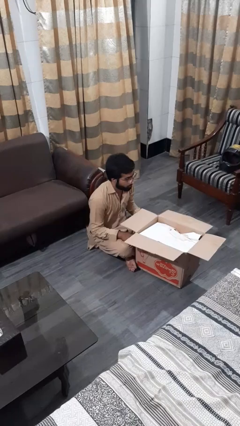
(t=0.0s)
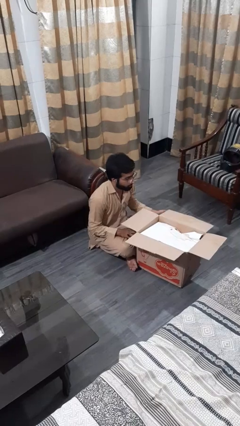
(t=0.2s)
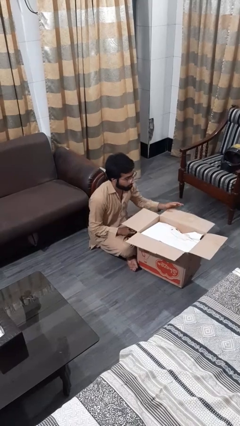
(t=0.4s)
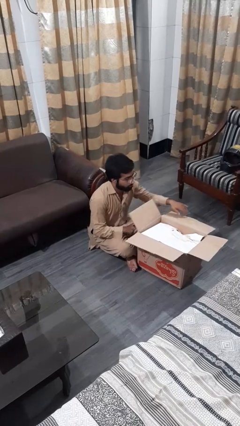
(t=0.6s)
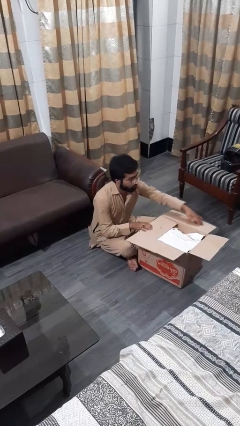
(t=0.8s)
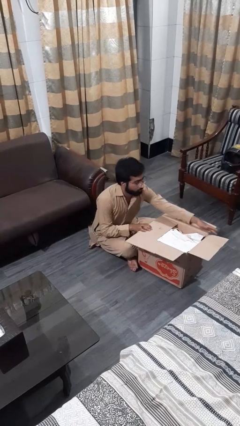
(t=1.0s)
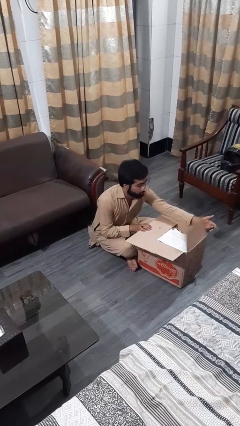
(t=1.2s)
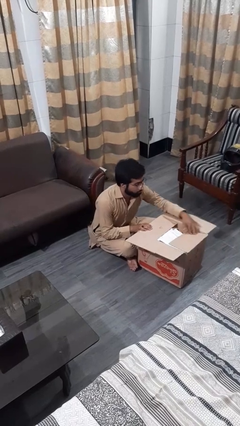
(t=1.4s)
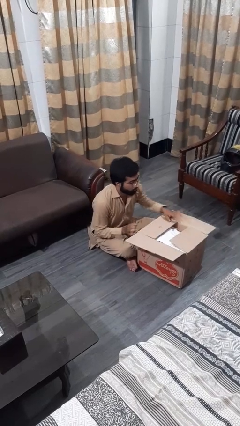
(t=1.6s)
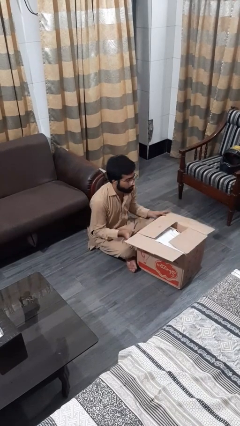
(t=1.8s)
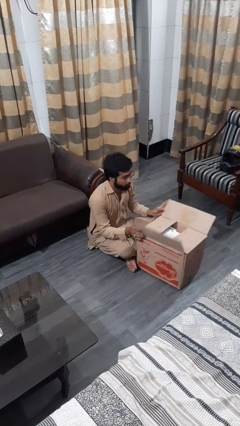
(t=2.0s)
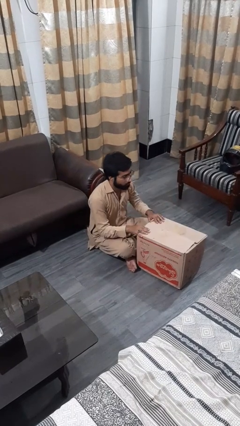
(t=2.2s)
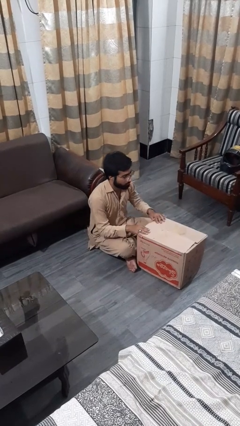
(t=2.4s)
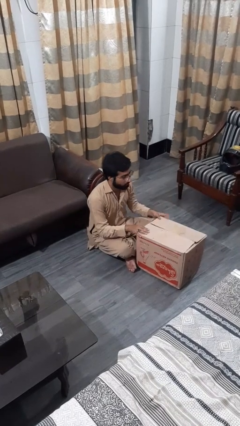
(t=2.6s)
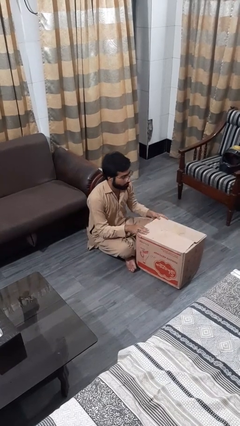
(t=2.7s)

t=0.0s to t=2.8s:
person closes box

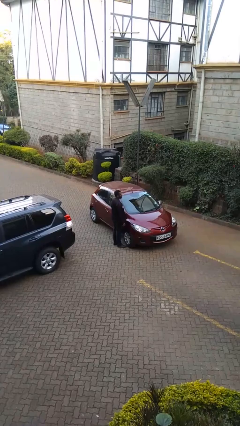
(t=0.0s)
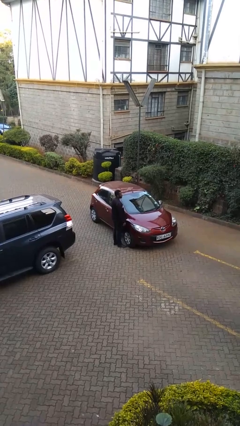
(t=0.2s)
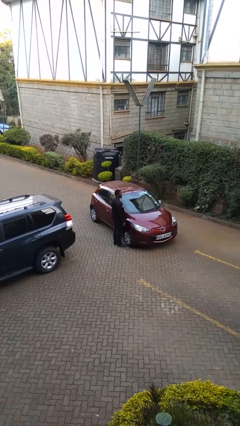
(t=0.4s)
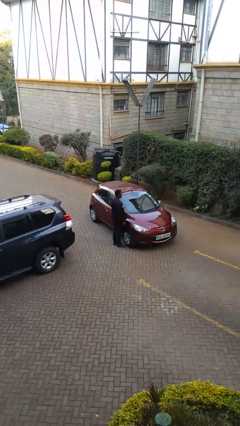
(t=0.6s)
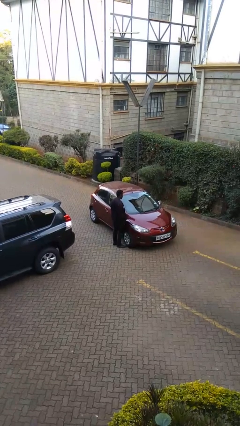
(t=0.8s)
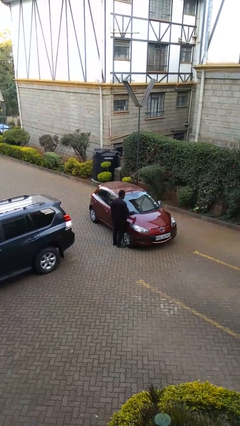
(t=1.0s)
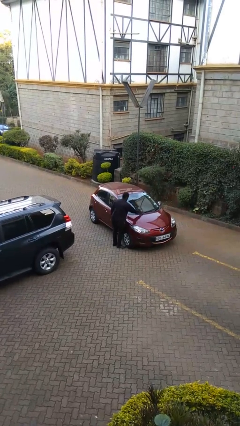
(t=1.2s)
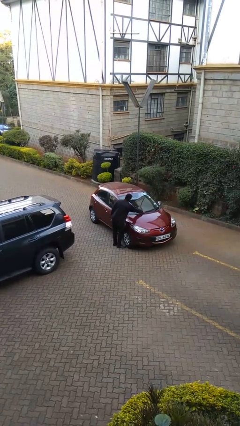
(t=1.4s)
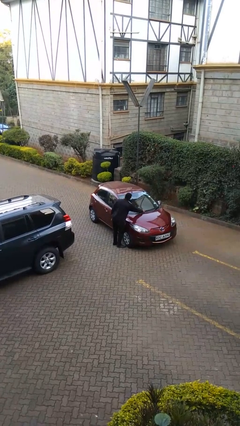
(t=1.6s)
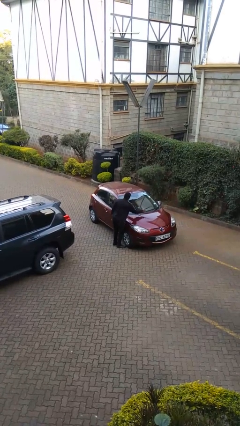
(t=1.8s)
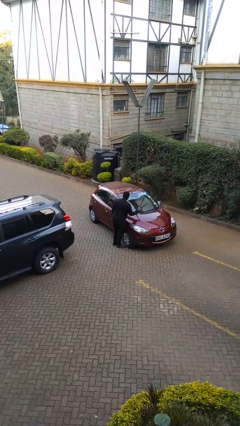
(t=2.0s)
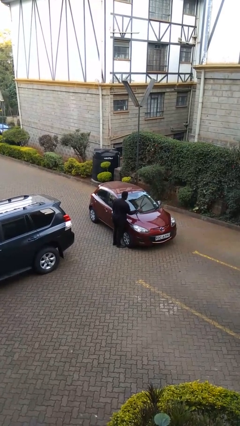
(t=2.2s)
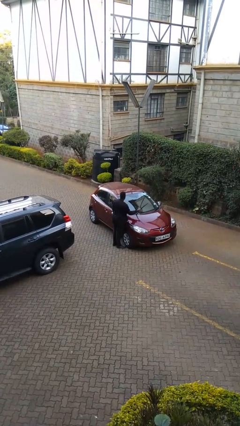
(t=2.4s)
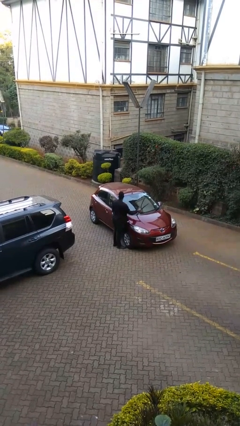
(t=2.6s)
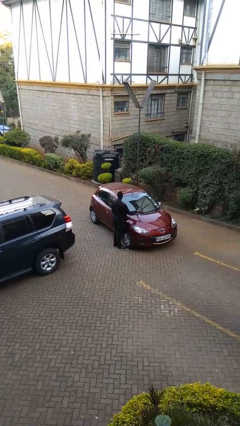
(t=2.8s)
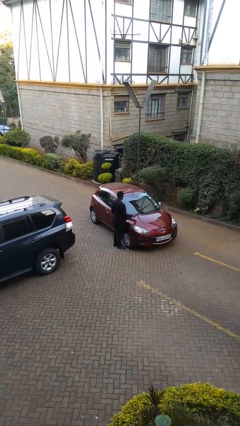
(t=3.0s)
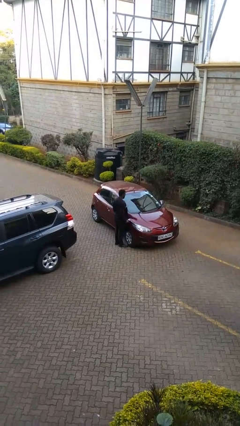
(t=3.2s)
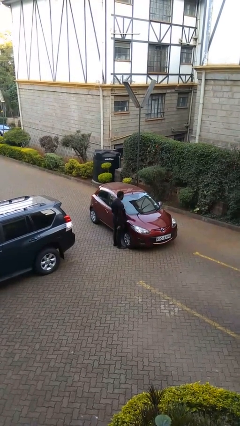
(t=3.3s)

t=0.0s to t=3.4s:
person flips up car wipers

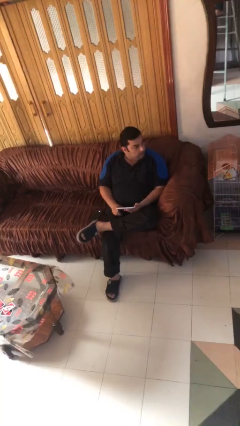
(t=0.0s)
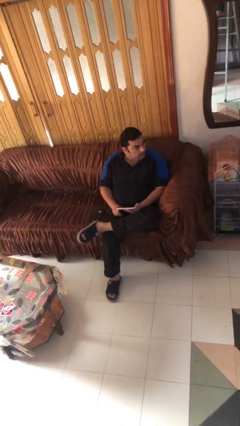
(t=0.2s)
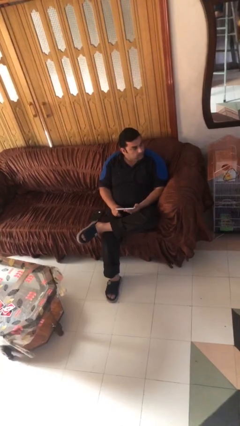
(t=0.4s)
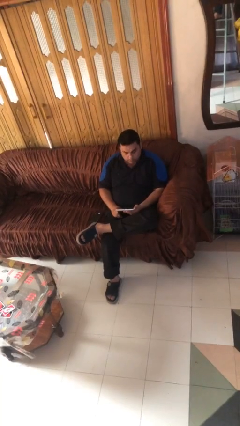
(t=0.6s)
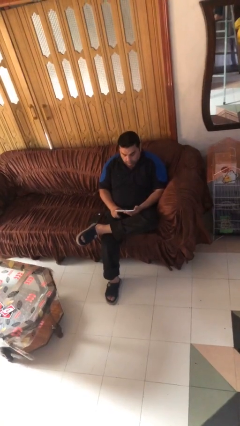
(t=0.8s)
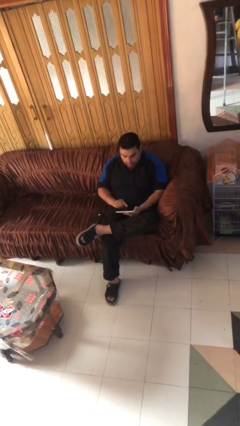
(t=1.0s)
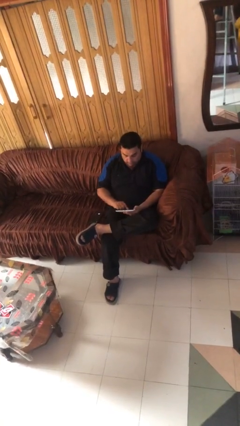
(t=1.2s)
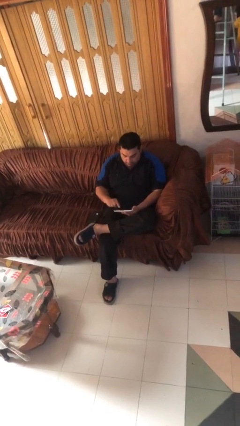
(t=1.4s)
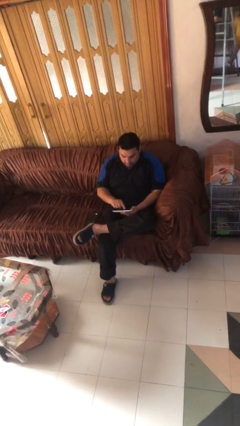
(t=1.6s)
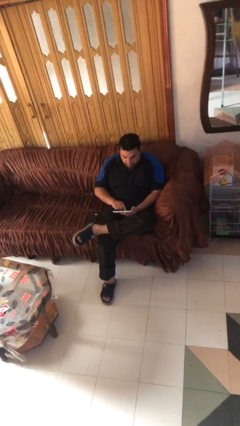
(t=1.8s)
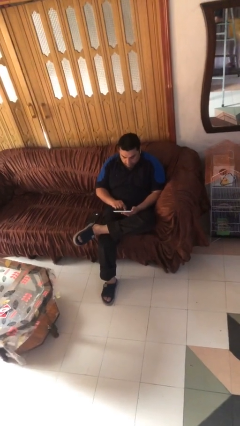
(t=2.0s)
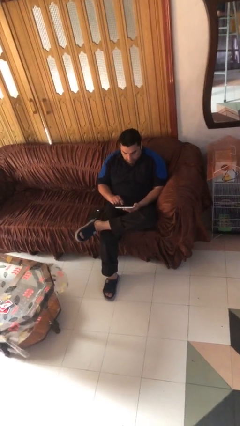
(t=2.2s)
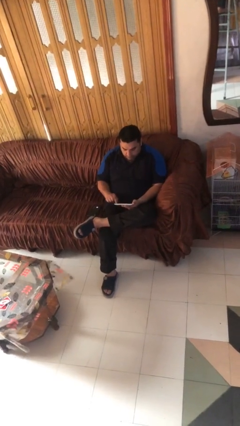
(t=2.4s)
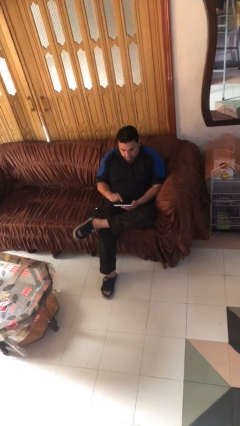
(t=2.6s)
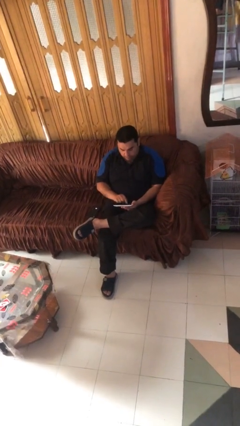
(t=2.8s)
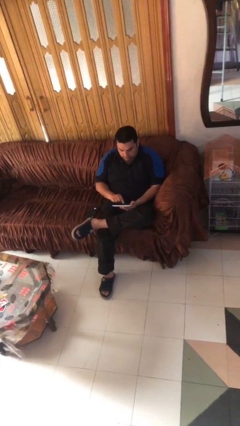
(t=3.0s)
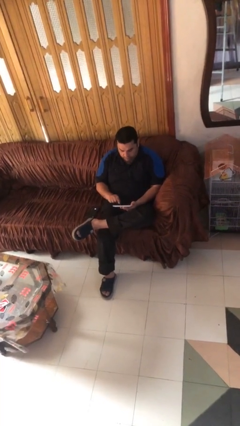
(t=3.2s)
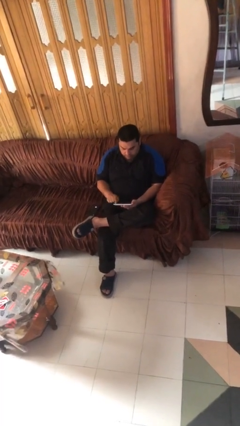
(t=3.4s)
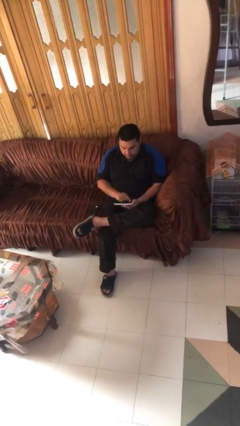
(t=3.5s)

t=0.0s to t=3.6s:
person interacts with tablet

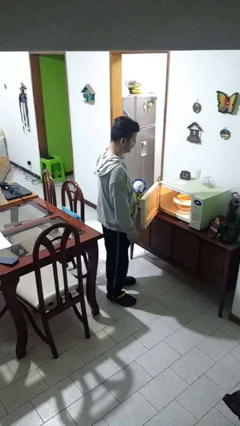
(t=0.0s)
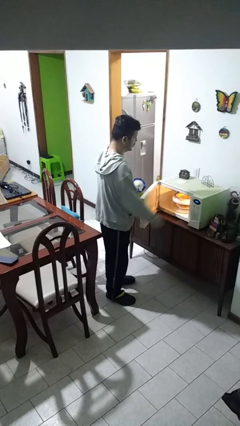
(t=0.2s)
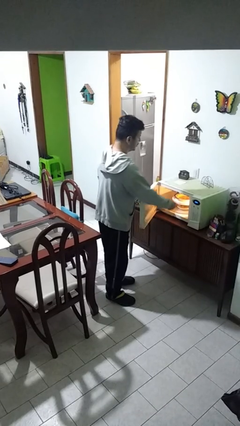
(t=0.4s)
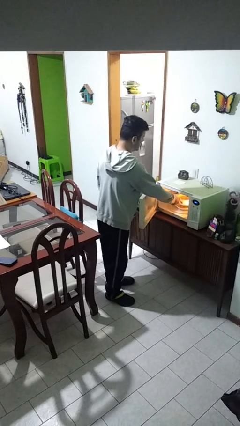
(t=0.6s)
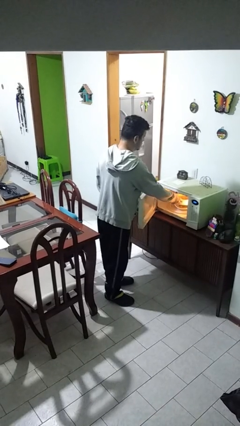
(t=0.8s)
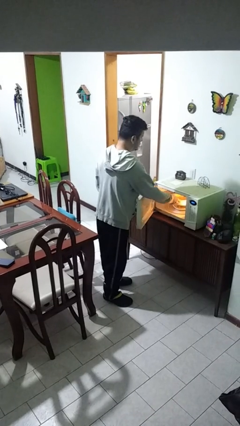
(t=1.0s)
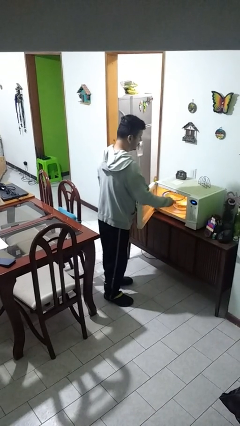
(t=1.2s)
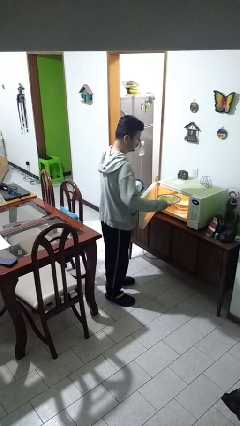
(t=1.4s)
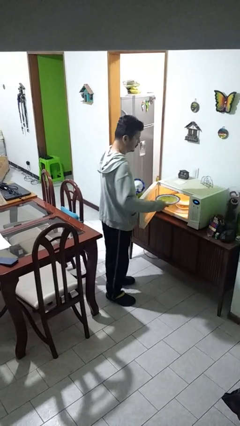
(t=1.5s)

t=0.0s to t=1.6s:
person takes object from microwave

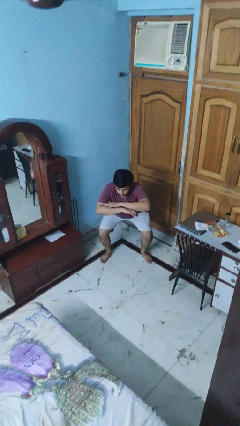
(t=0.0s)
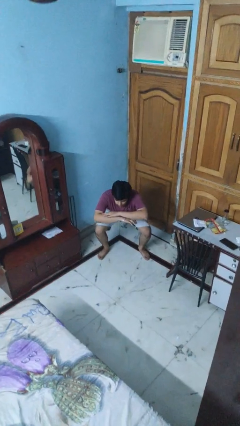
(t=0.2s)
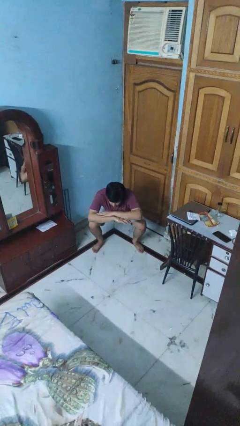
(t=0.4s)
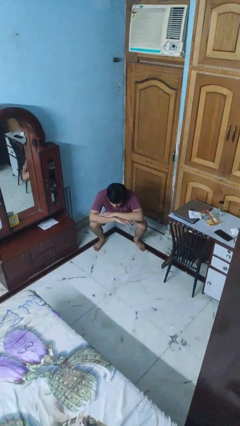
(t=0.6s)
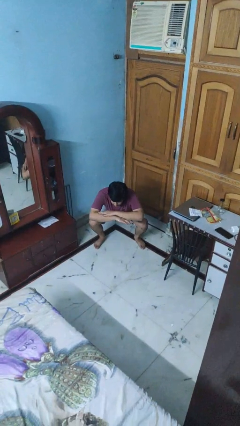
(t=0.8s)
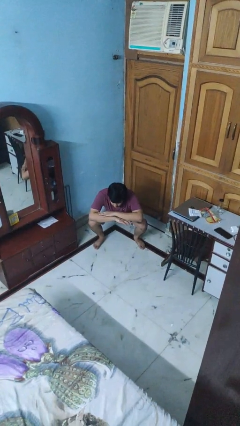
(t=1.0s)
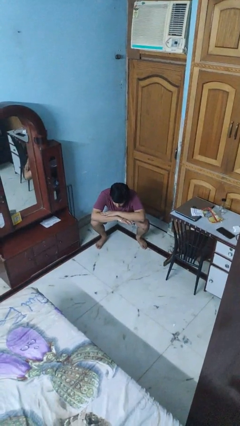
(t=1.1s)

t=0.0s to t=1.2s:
person squats

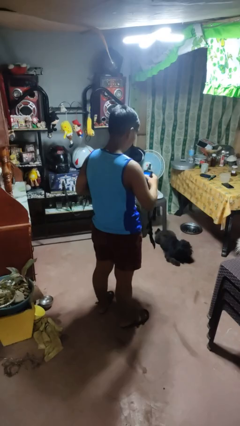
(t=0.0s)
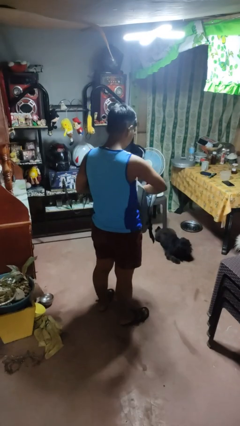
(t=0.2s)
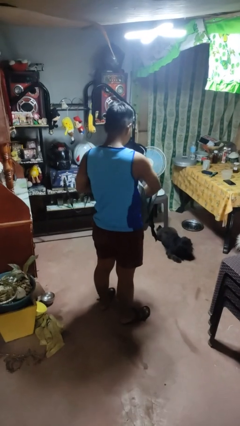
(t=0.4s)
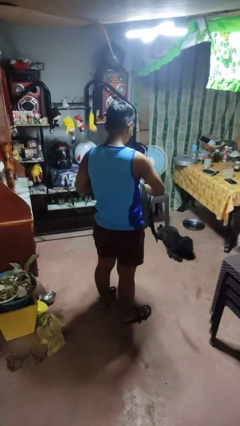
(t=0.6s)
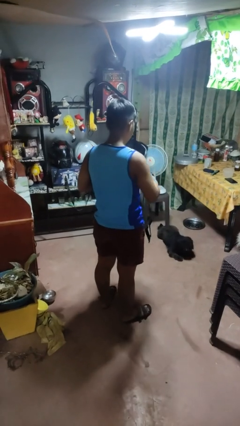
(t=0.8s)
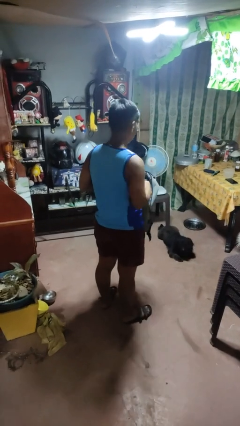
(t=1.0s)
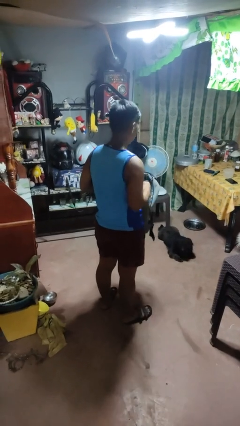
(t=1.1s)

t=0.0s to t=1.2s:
person puts object into bag

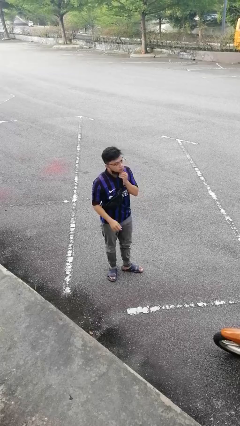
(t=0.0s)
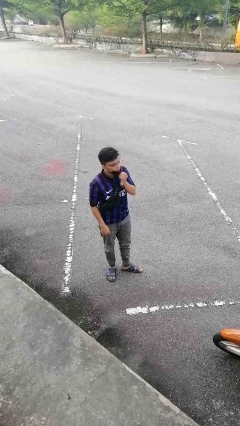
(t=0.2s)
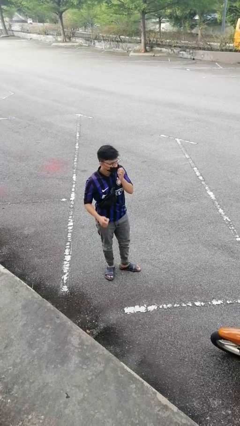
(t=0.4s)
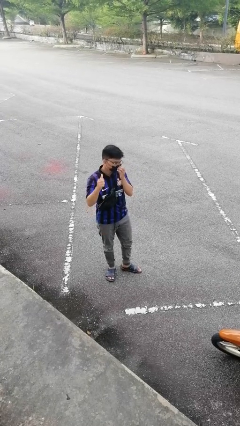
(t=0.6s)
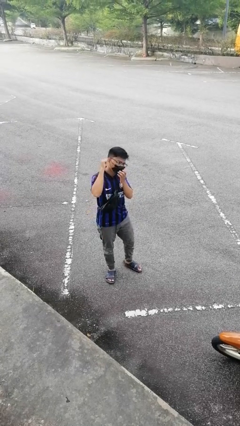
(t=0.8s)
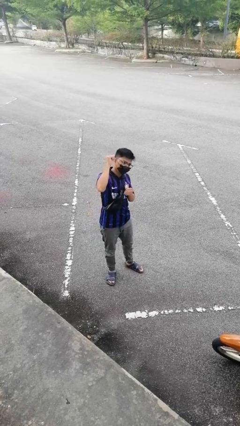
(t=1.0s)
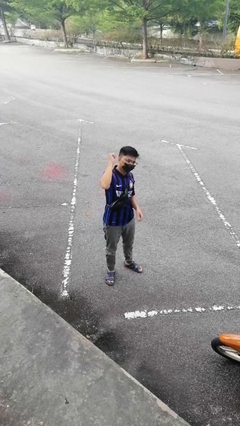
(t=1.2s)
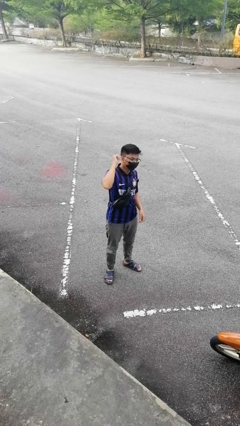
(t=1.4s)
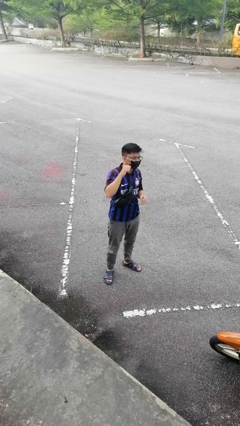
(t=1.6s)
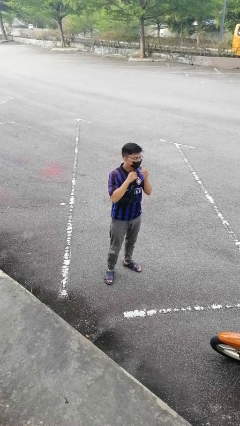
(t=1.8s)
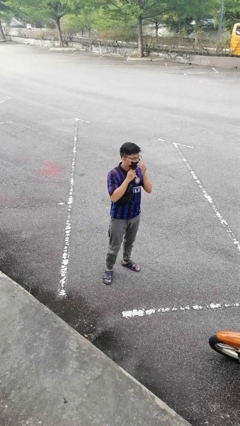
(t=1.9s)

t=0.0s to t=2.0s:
person gestures behind me

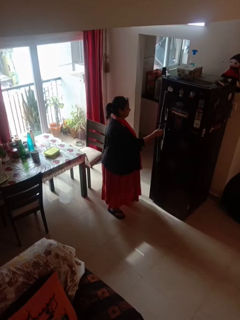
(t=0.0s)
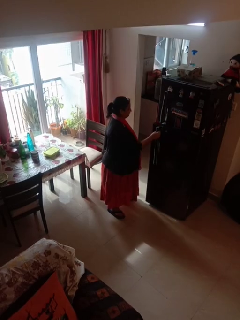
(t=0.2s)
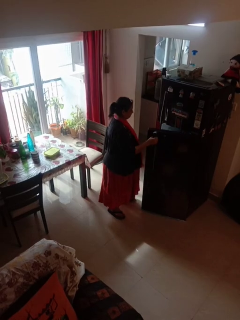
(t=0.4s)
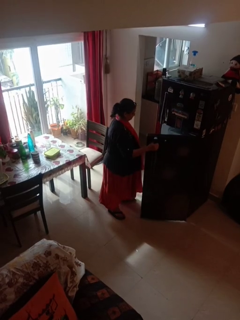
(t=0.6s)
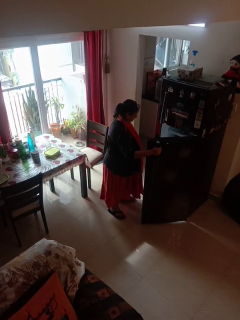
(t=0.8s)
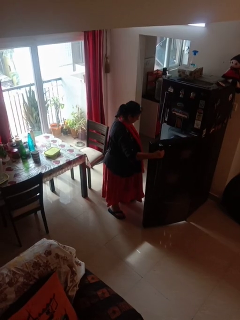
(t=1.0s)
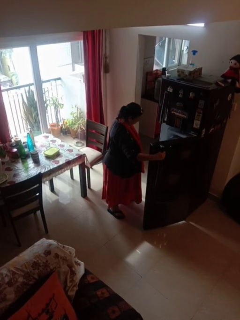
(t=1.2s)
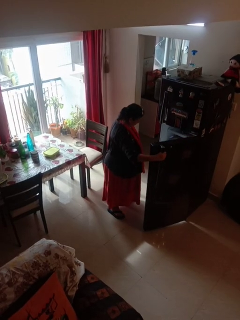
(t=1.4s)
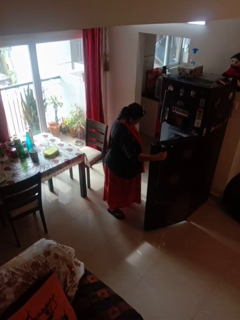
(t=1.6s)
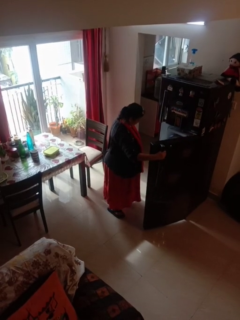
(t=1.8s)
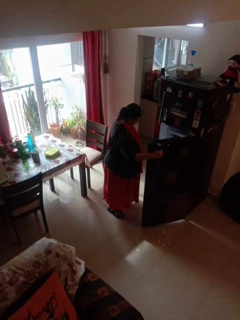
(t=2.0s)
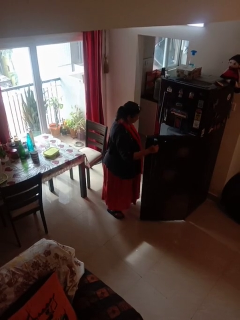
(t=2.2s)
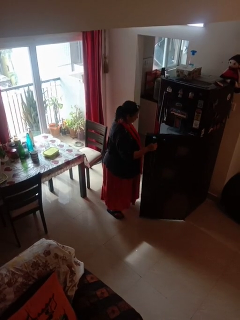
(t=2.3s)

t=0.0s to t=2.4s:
person opens refrigerator
